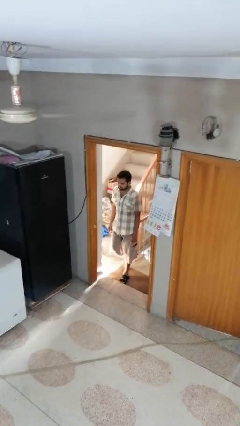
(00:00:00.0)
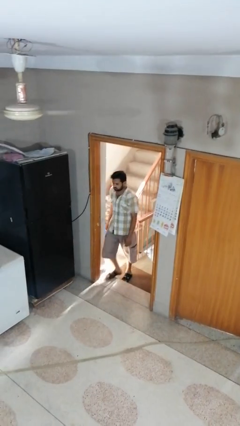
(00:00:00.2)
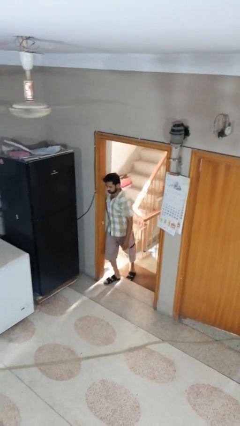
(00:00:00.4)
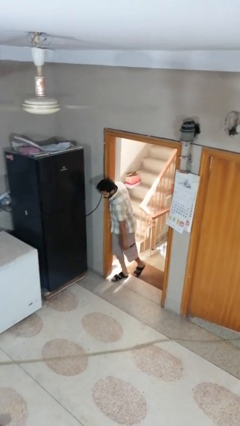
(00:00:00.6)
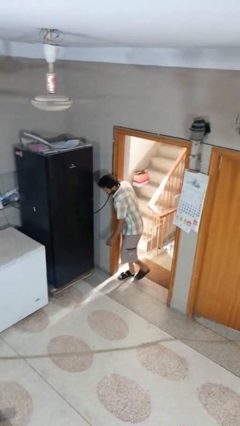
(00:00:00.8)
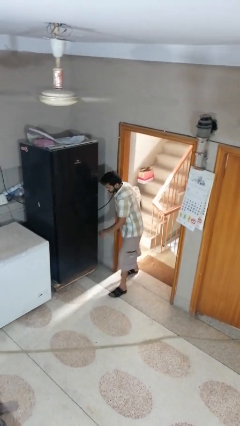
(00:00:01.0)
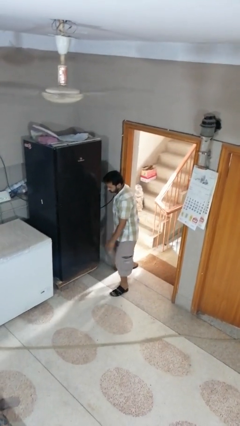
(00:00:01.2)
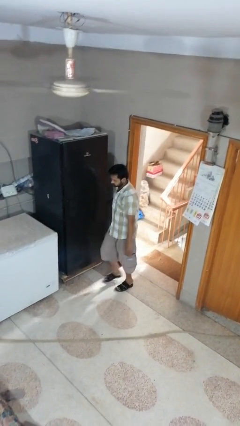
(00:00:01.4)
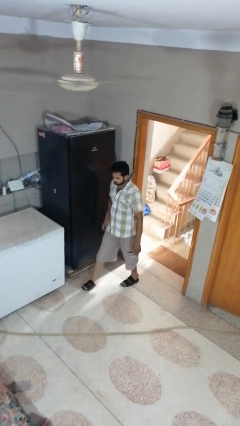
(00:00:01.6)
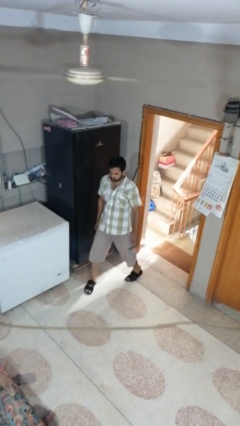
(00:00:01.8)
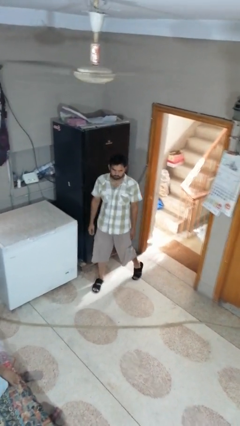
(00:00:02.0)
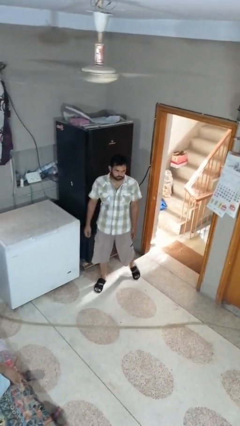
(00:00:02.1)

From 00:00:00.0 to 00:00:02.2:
person bumps into wall

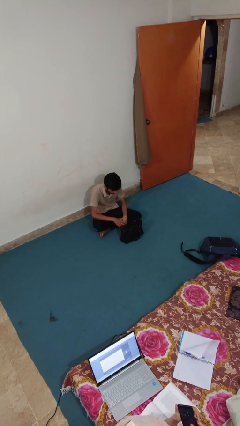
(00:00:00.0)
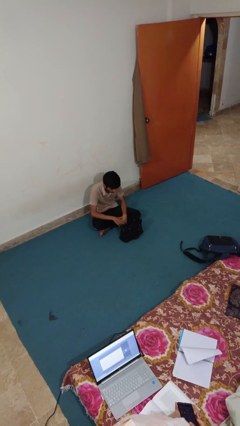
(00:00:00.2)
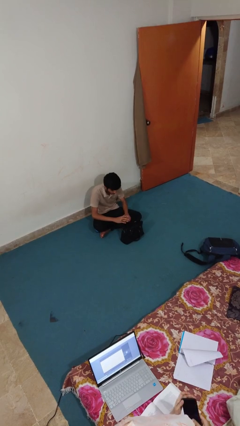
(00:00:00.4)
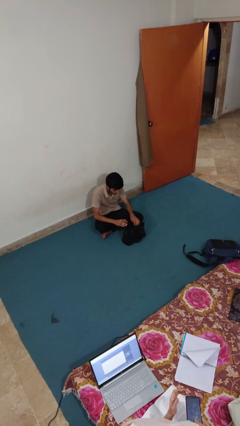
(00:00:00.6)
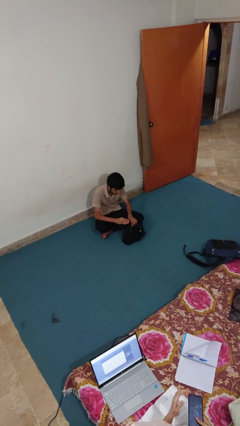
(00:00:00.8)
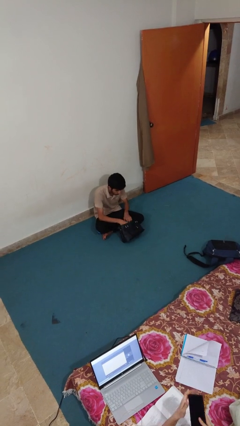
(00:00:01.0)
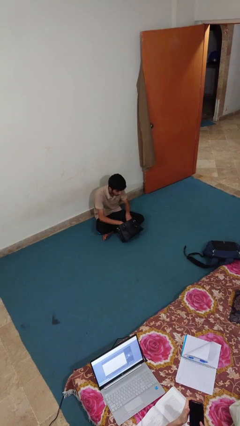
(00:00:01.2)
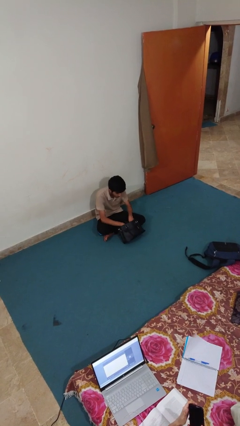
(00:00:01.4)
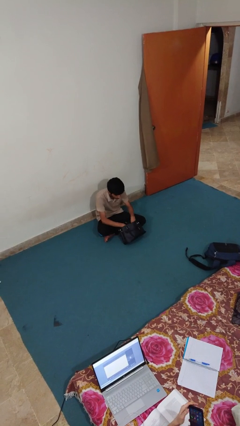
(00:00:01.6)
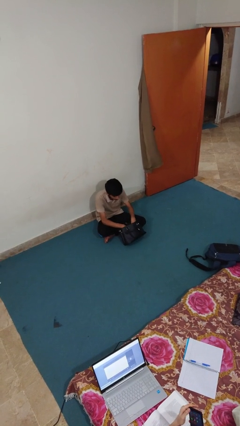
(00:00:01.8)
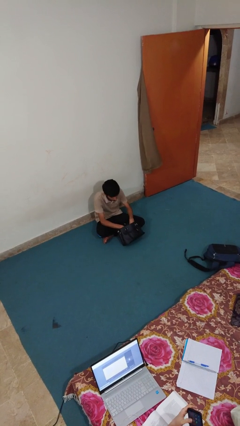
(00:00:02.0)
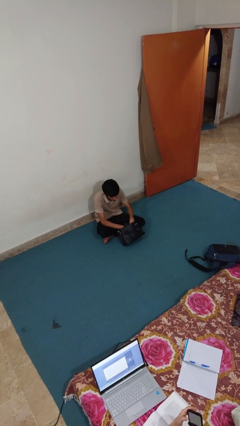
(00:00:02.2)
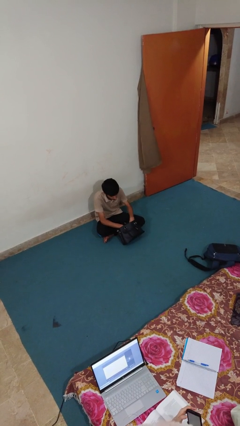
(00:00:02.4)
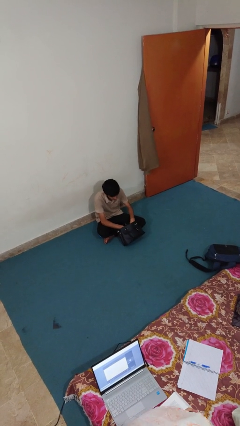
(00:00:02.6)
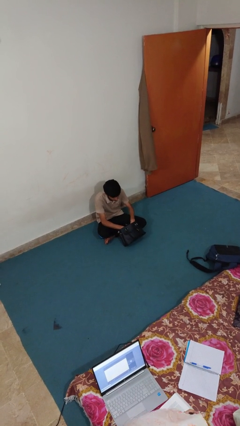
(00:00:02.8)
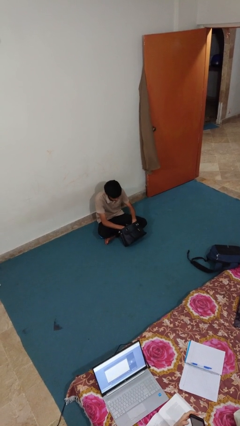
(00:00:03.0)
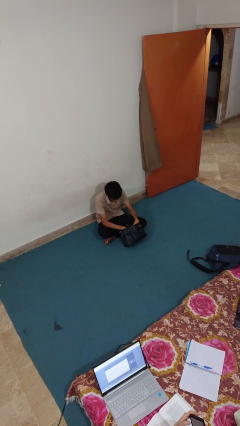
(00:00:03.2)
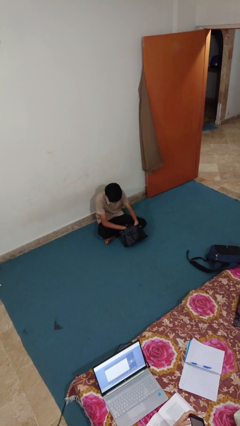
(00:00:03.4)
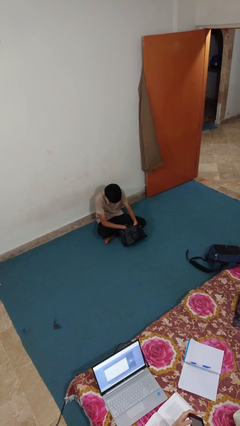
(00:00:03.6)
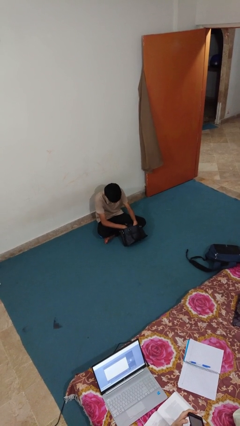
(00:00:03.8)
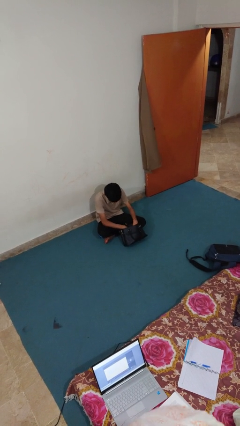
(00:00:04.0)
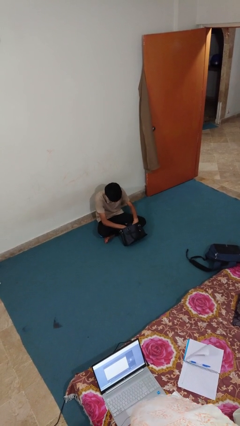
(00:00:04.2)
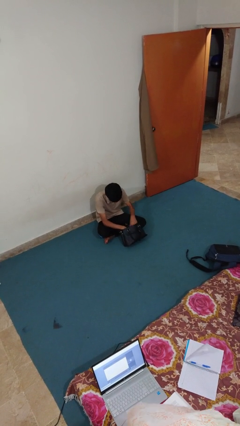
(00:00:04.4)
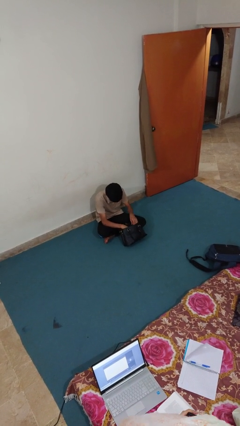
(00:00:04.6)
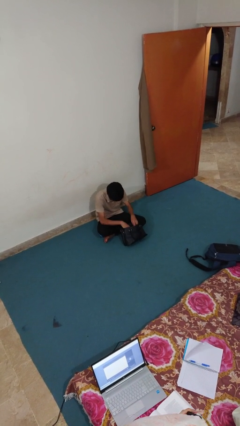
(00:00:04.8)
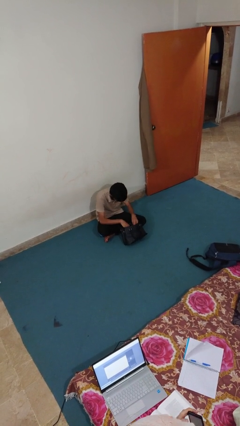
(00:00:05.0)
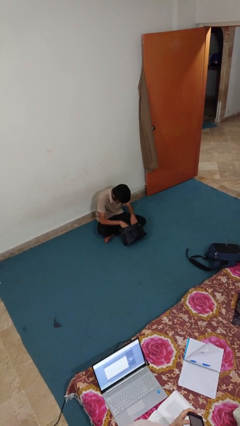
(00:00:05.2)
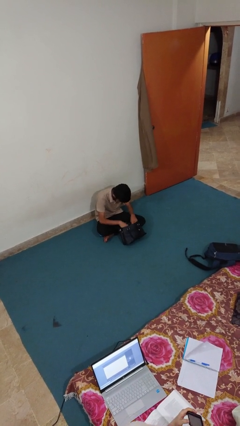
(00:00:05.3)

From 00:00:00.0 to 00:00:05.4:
person searches in purse

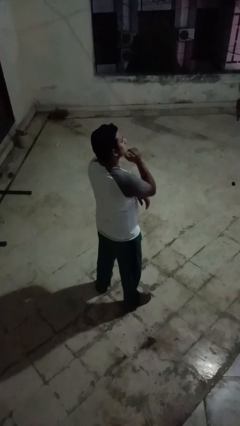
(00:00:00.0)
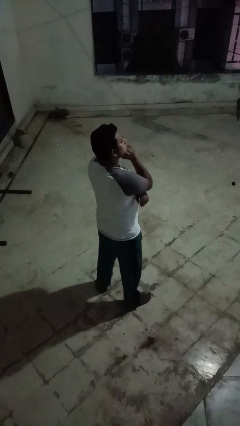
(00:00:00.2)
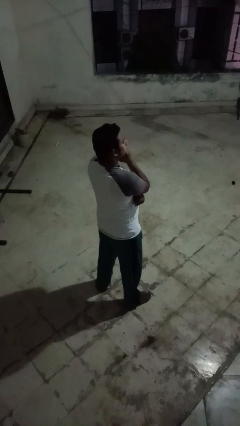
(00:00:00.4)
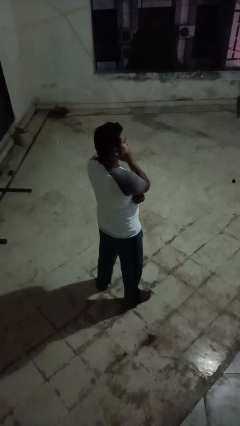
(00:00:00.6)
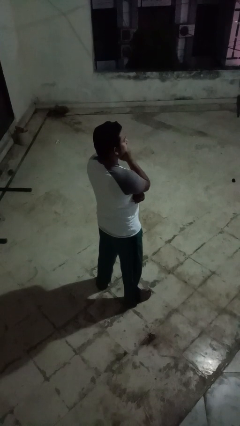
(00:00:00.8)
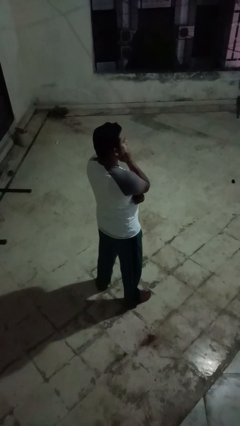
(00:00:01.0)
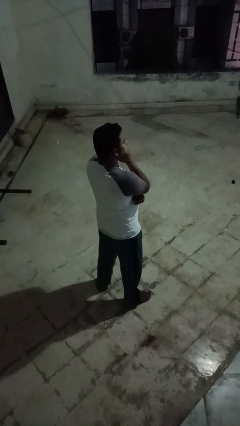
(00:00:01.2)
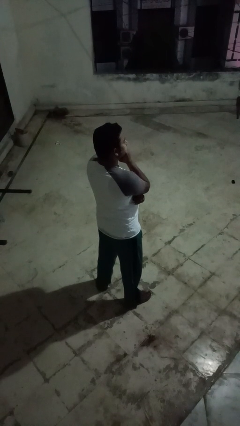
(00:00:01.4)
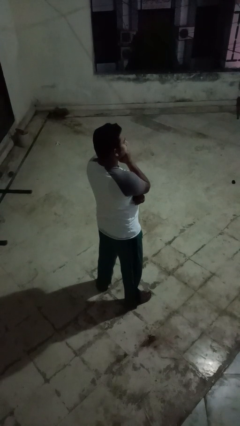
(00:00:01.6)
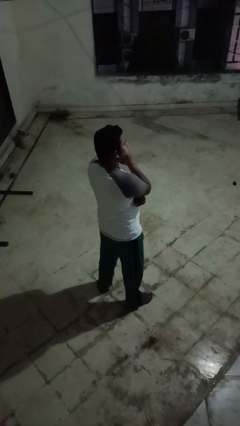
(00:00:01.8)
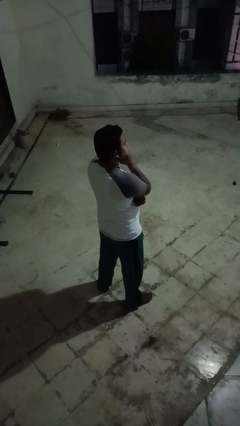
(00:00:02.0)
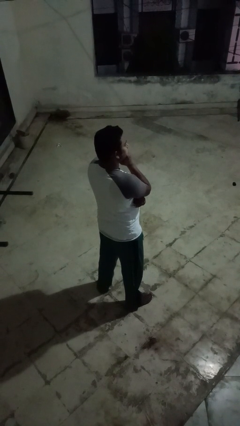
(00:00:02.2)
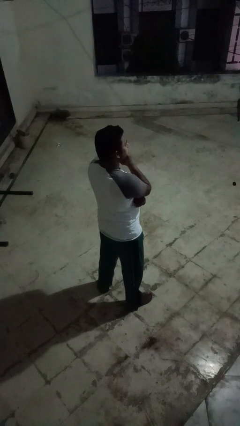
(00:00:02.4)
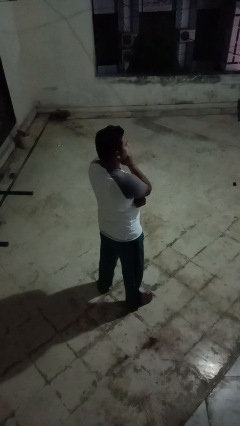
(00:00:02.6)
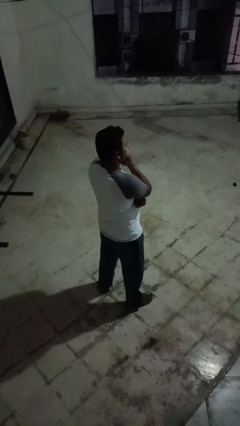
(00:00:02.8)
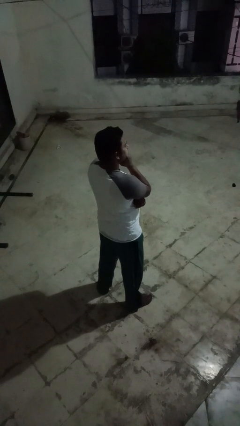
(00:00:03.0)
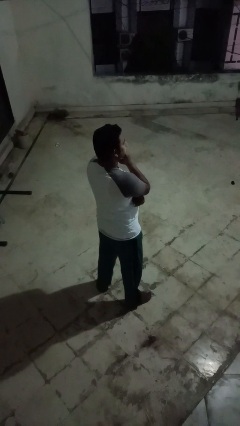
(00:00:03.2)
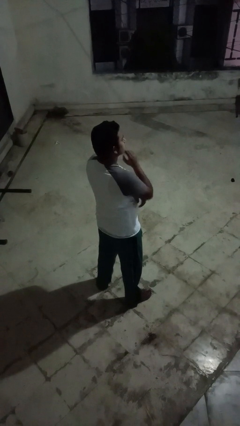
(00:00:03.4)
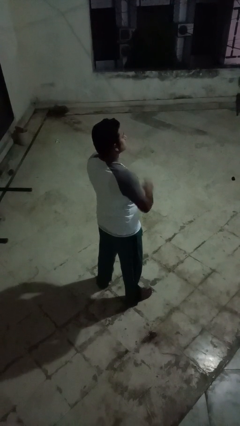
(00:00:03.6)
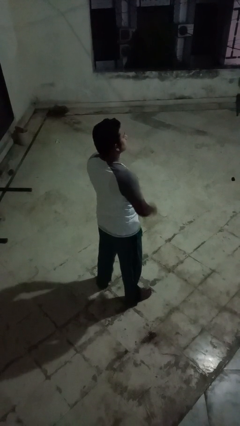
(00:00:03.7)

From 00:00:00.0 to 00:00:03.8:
person strokes chin

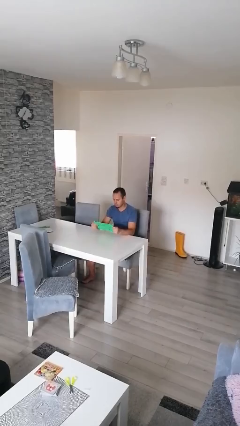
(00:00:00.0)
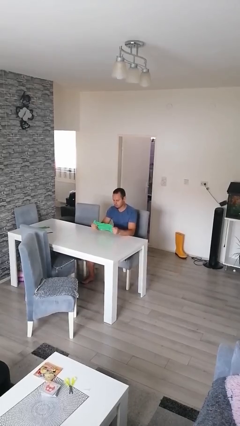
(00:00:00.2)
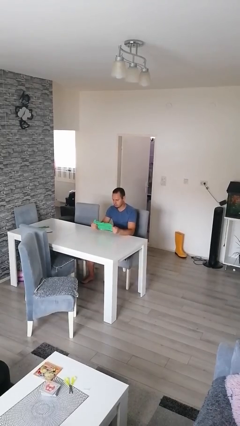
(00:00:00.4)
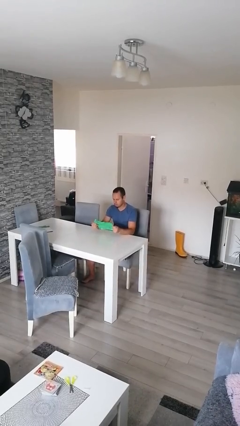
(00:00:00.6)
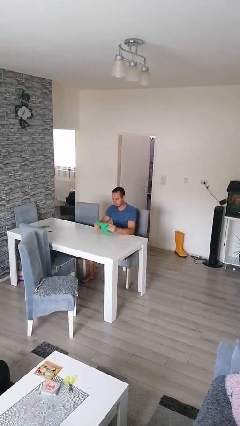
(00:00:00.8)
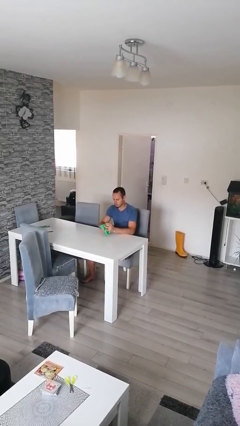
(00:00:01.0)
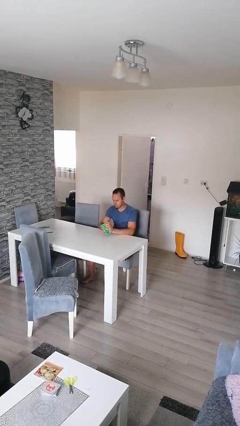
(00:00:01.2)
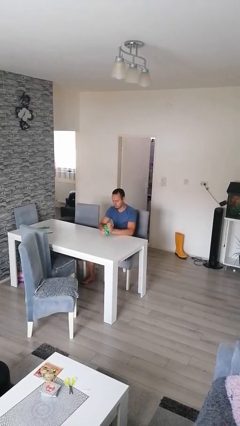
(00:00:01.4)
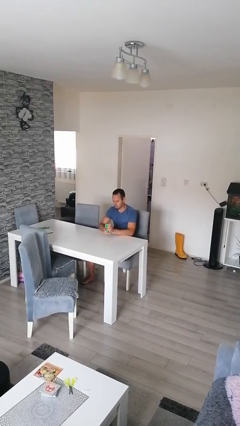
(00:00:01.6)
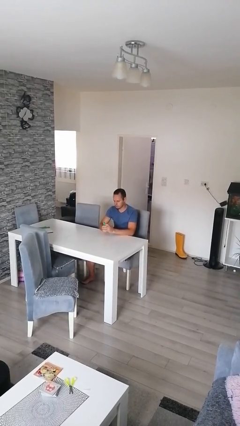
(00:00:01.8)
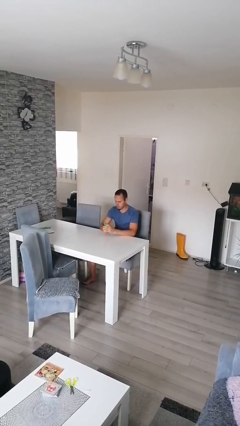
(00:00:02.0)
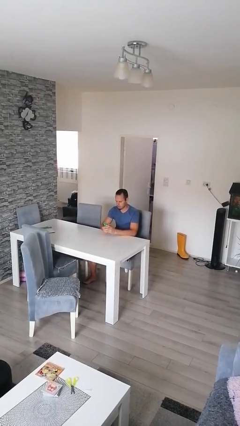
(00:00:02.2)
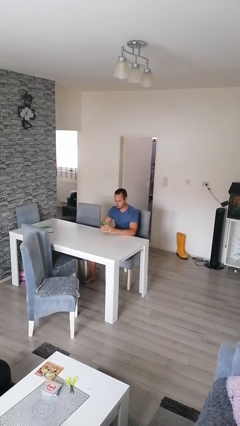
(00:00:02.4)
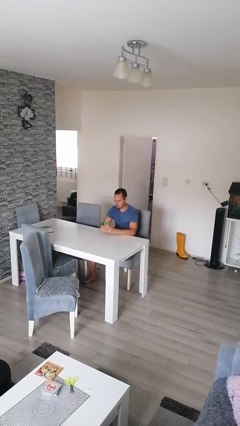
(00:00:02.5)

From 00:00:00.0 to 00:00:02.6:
person crumples paper

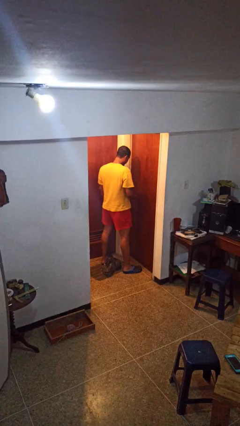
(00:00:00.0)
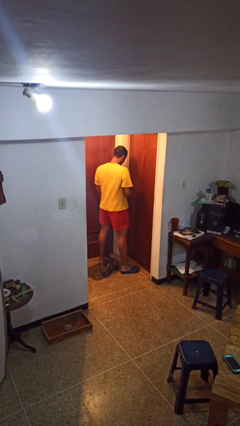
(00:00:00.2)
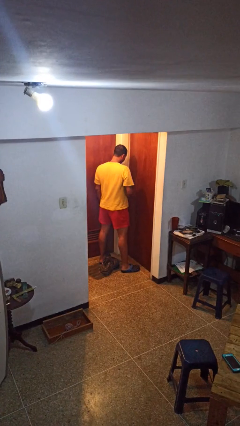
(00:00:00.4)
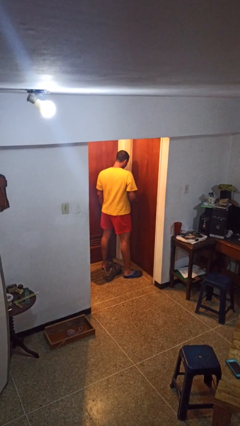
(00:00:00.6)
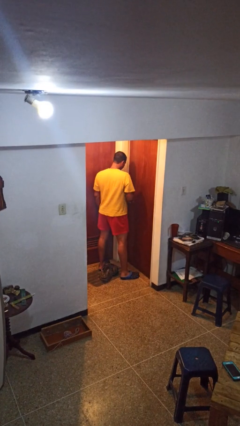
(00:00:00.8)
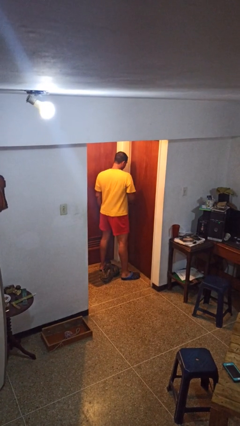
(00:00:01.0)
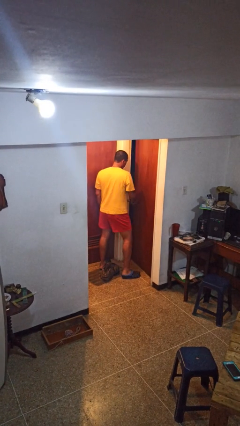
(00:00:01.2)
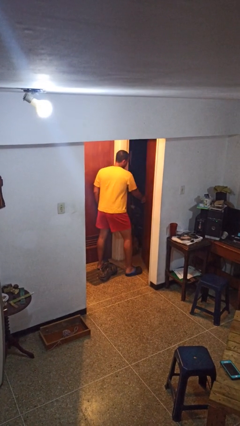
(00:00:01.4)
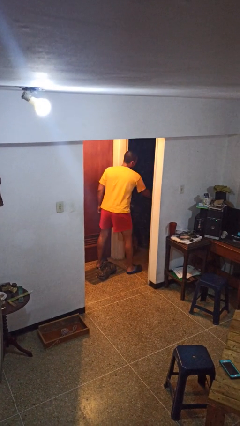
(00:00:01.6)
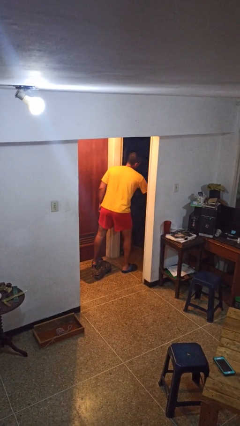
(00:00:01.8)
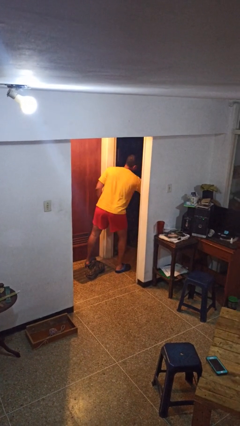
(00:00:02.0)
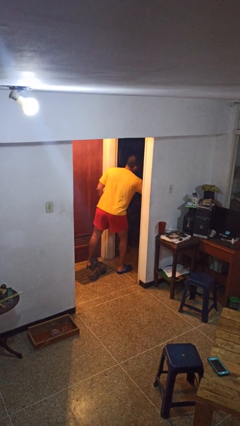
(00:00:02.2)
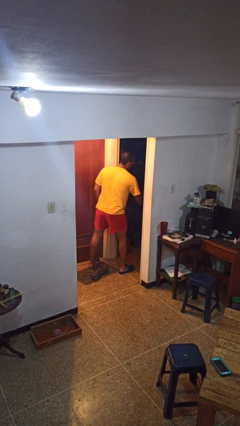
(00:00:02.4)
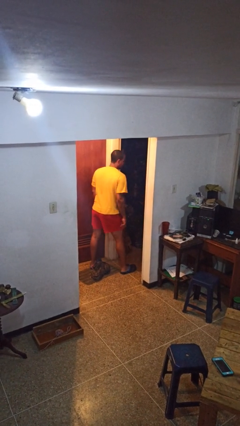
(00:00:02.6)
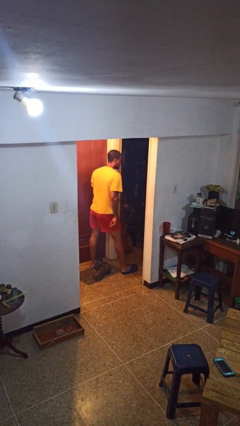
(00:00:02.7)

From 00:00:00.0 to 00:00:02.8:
person opens facility door

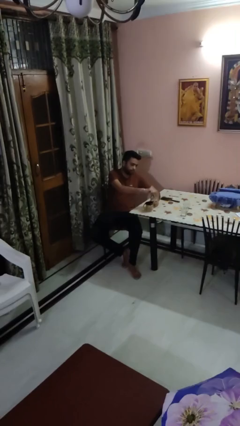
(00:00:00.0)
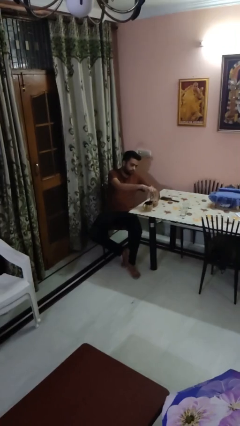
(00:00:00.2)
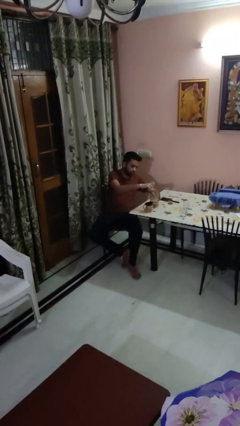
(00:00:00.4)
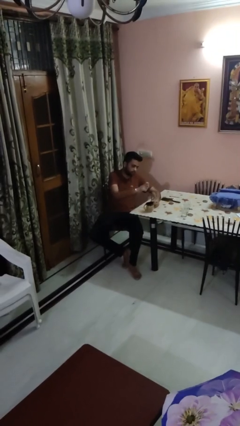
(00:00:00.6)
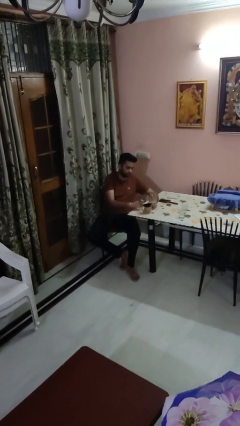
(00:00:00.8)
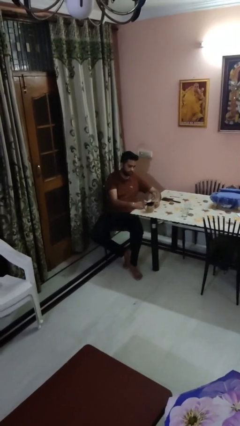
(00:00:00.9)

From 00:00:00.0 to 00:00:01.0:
person unscrews lid from bottle
